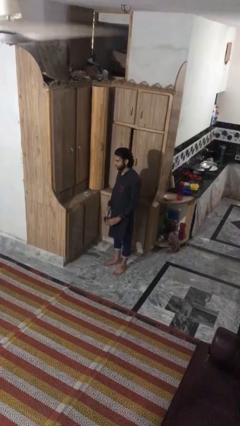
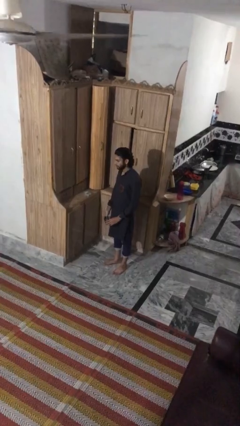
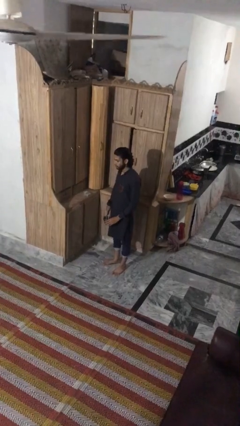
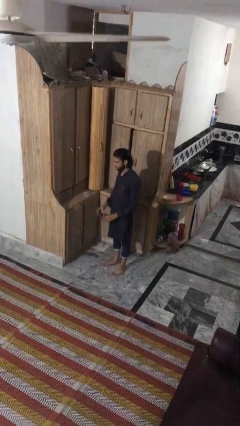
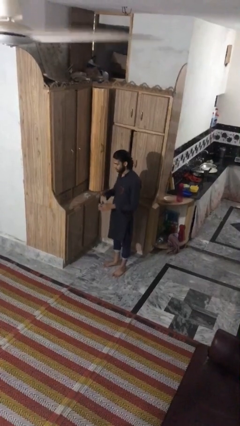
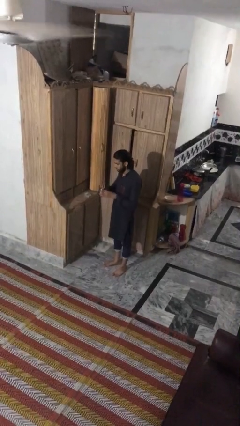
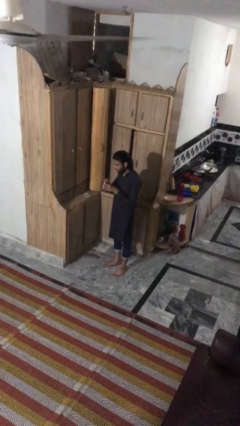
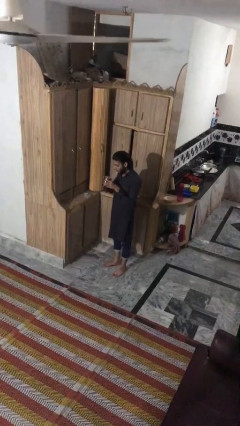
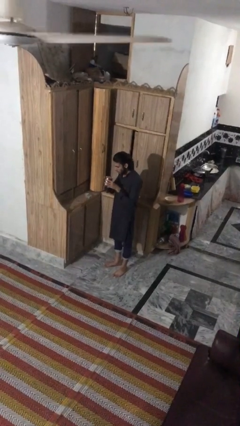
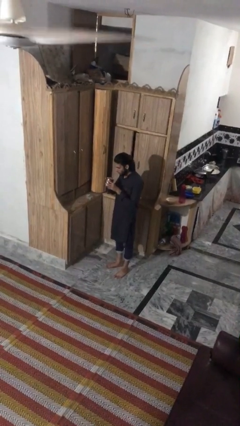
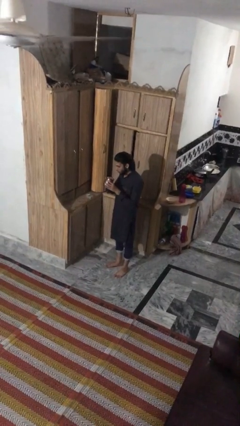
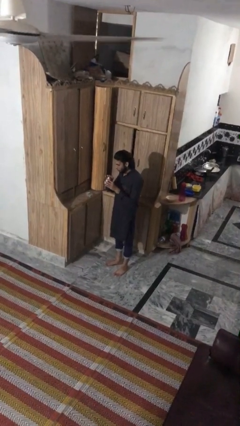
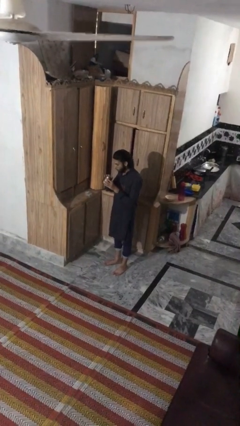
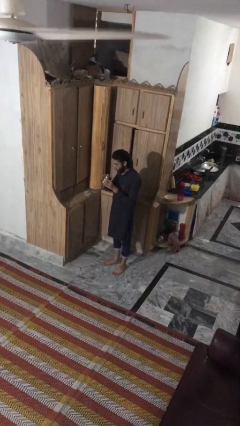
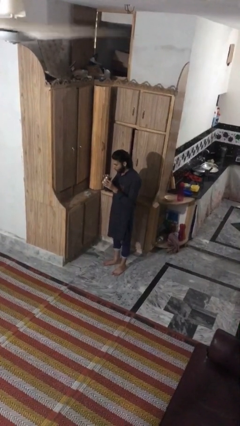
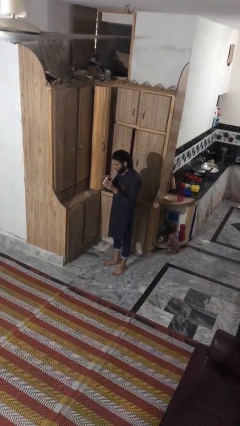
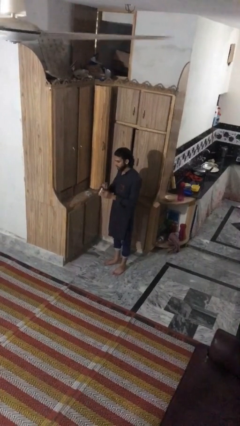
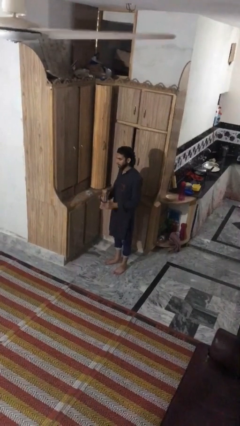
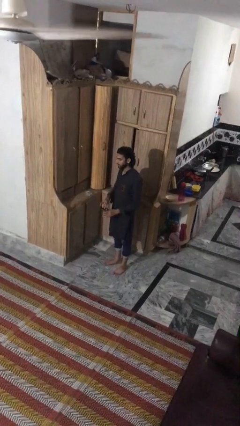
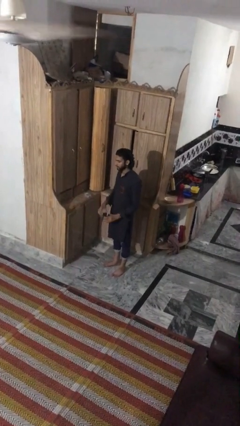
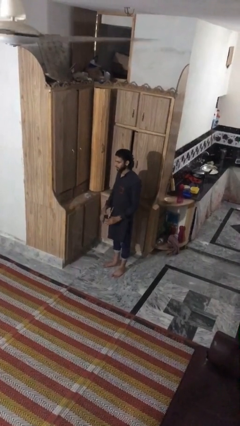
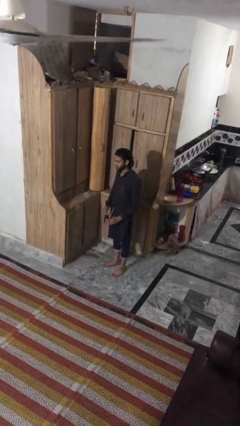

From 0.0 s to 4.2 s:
person drinks from straw

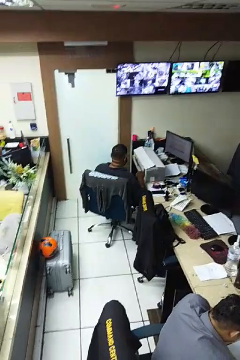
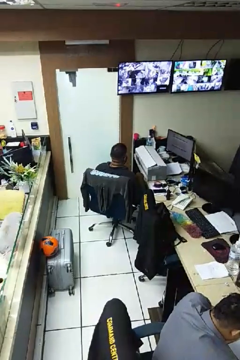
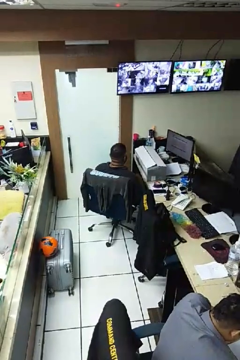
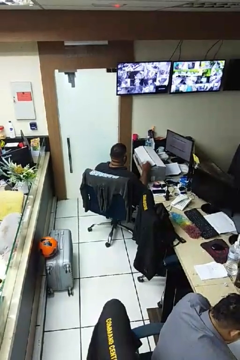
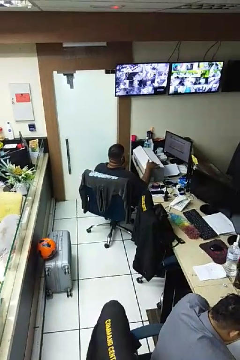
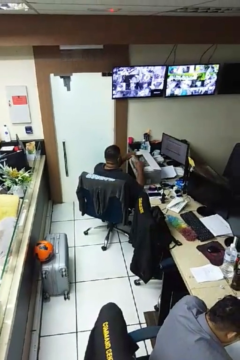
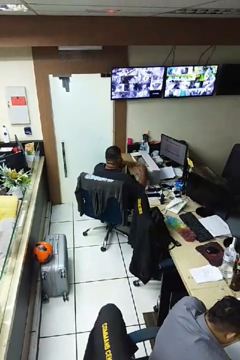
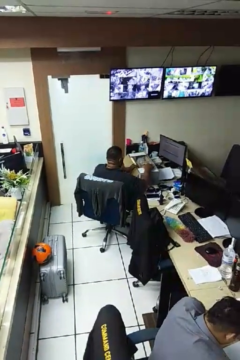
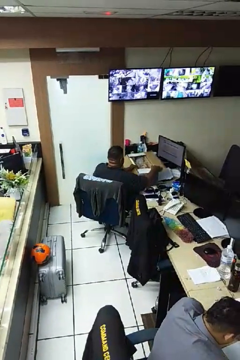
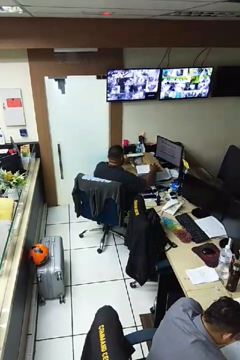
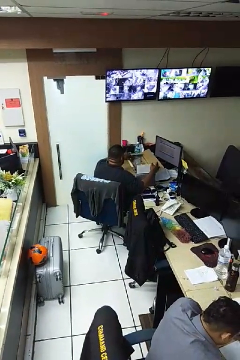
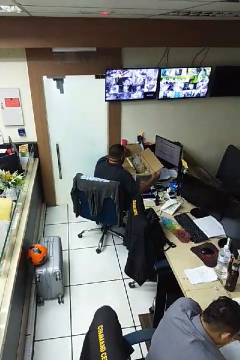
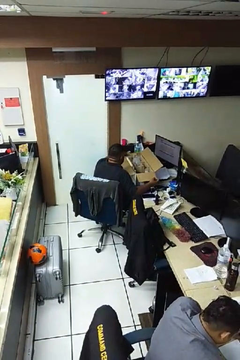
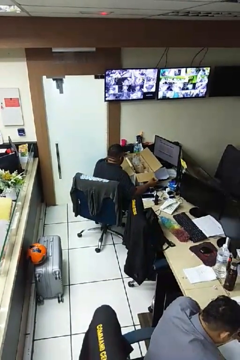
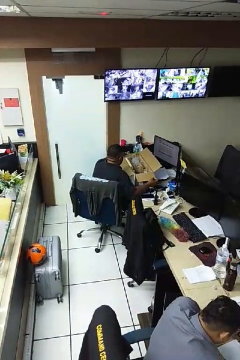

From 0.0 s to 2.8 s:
person opens box

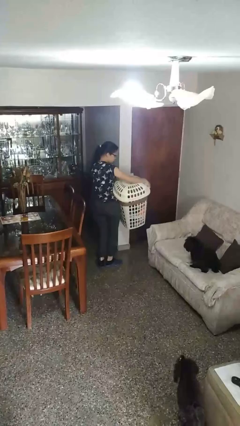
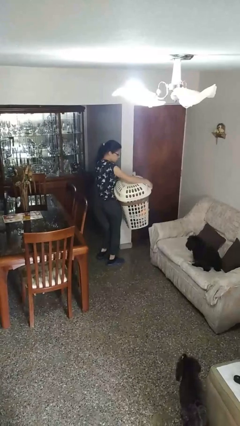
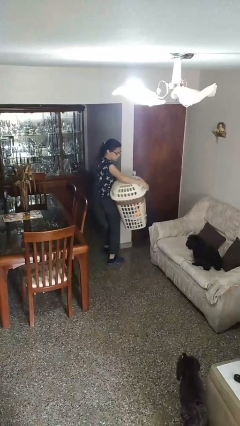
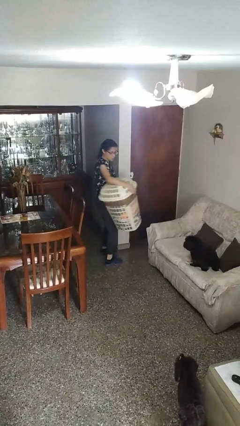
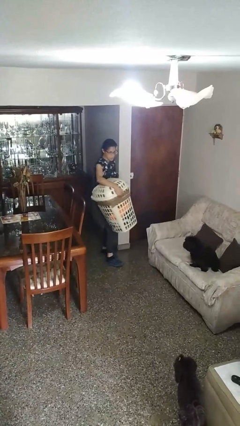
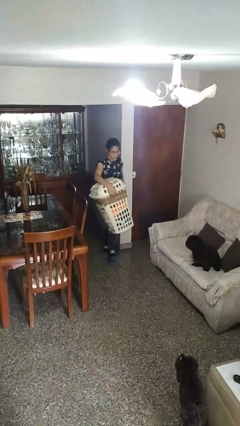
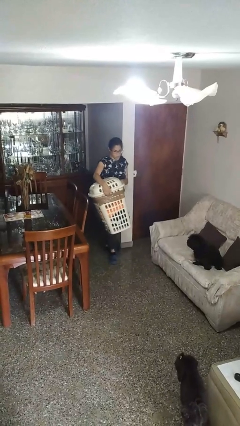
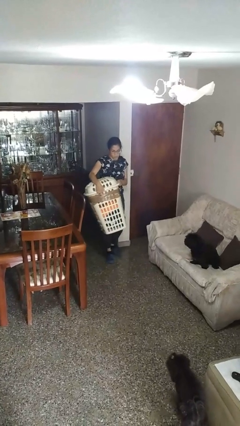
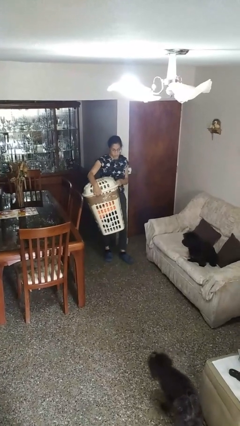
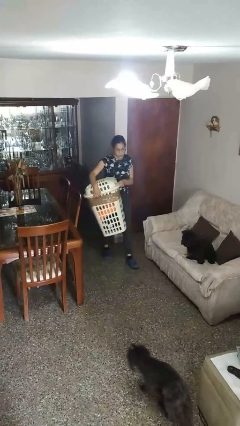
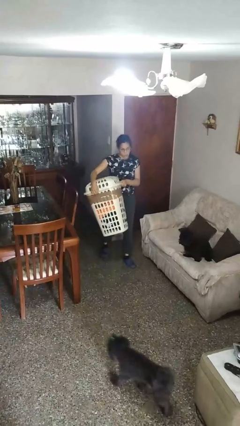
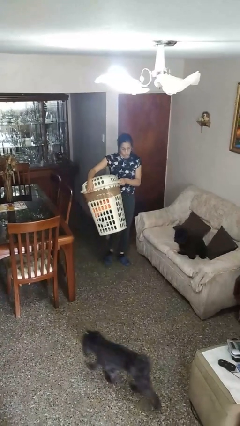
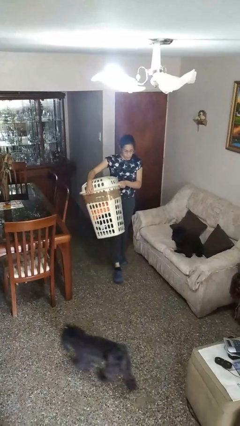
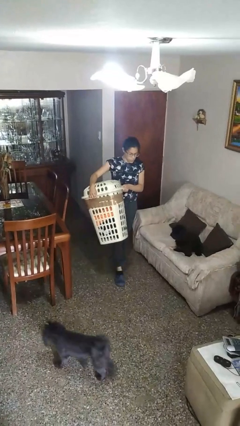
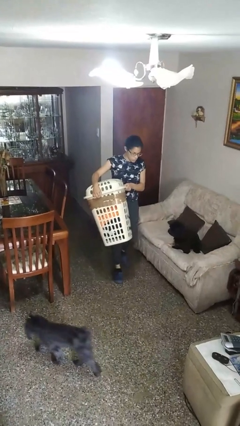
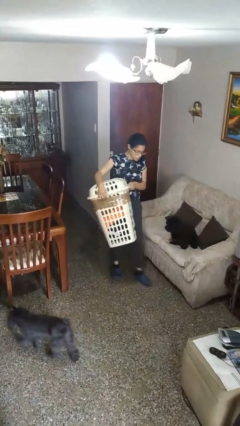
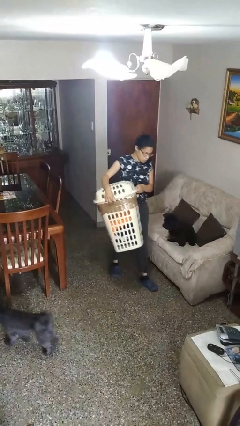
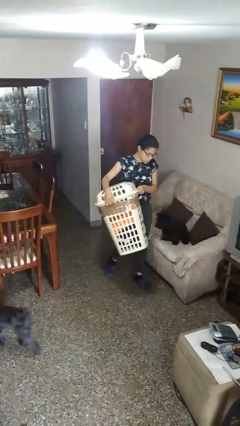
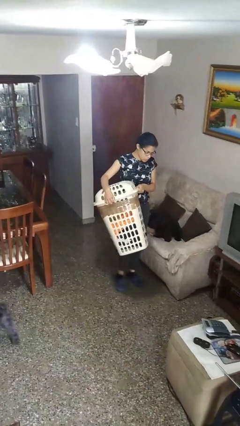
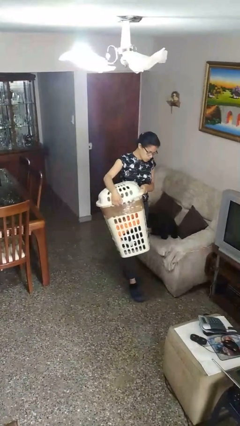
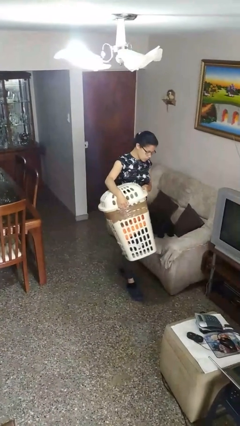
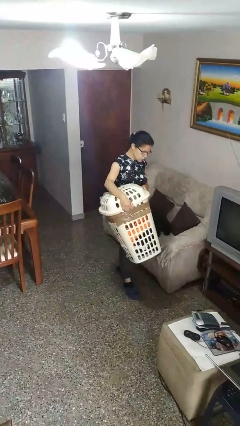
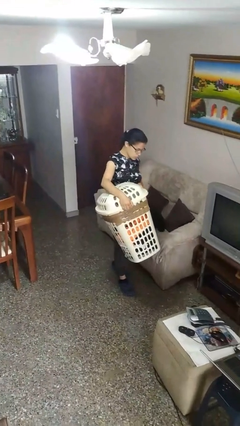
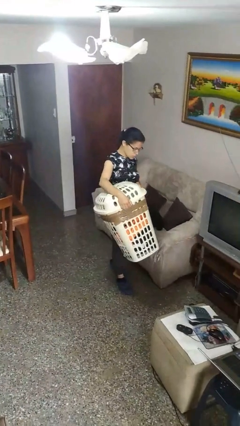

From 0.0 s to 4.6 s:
person carries laundry basket

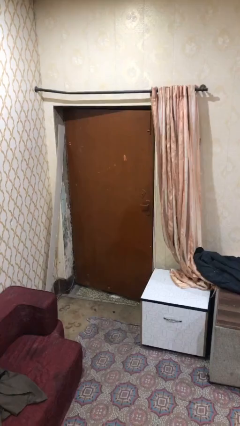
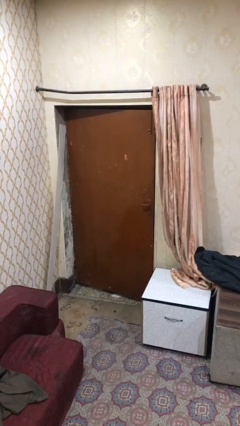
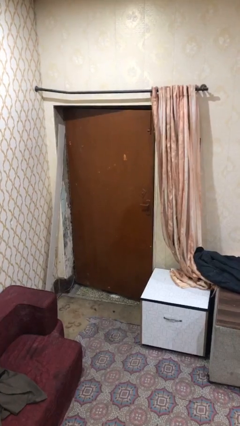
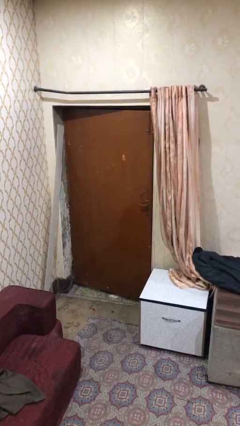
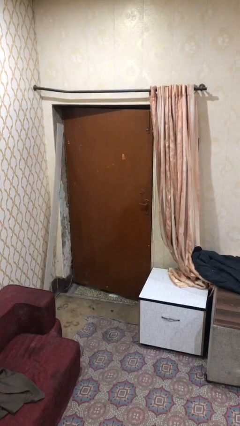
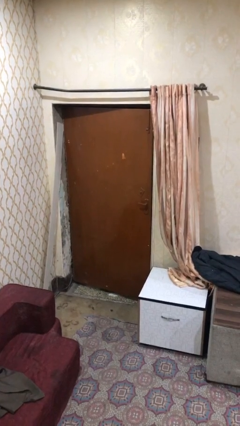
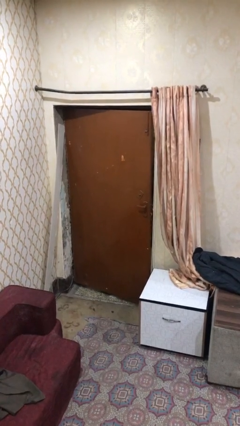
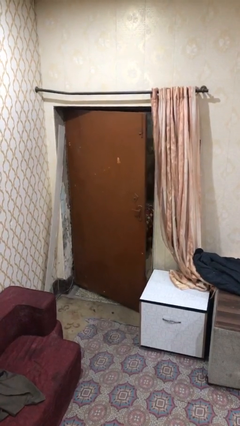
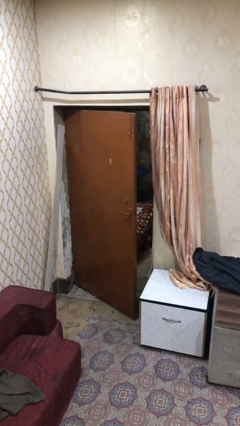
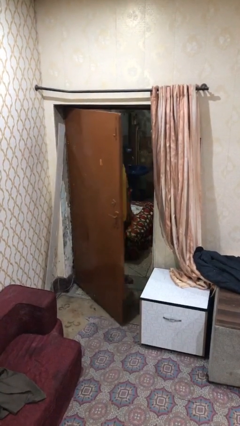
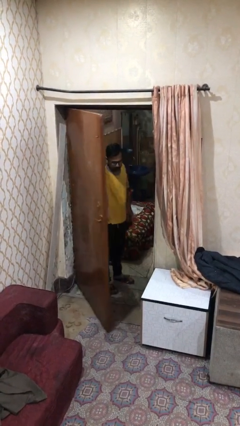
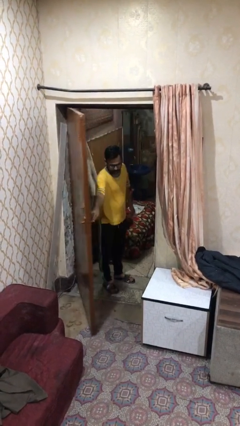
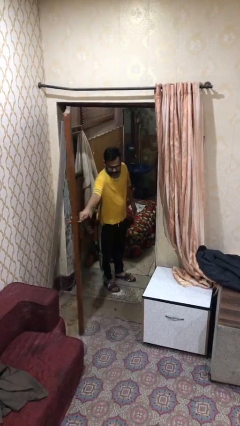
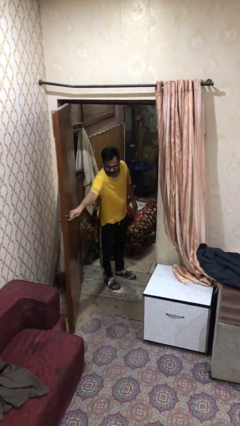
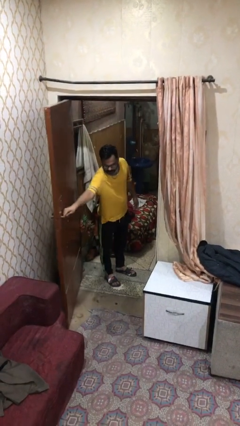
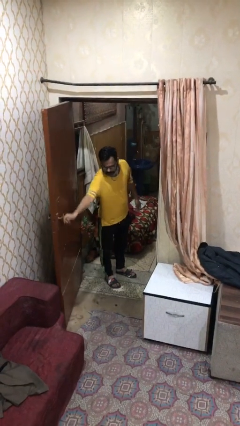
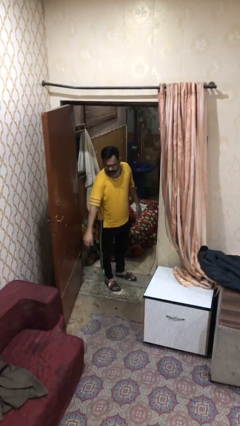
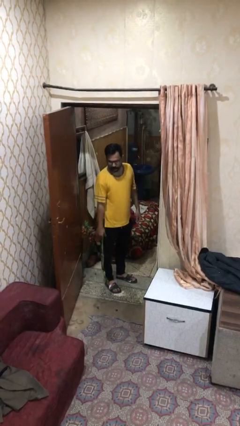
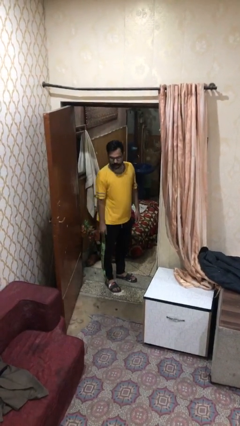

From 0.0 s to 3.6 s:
person opens facility door

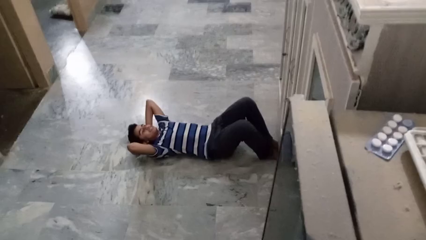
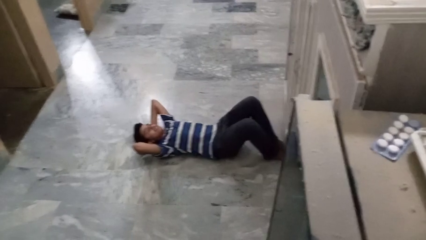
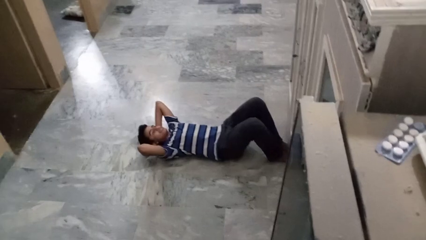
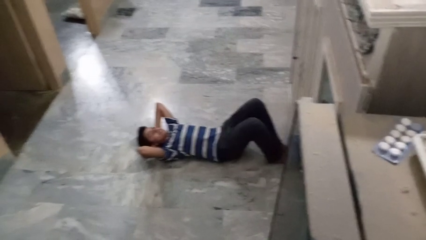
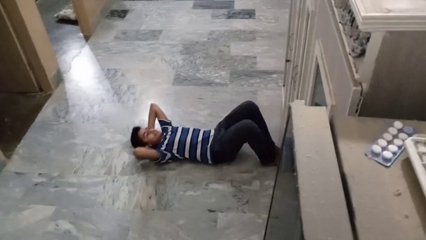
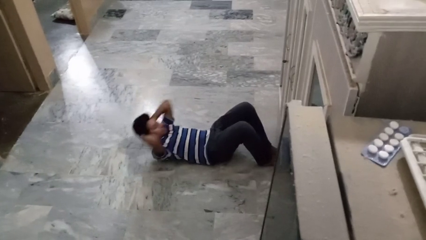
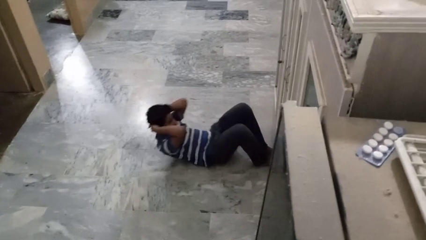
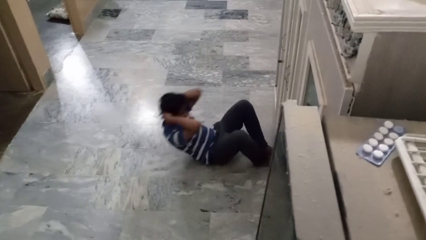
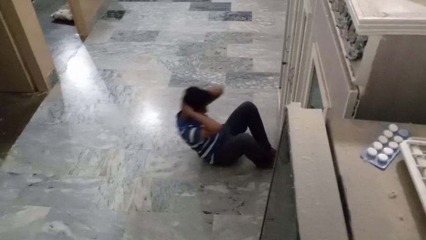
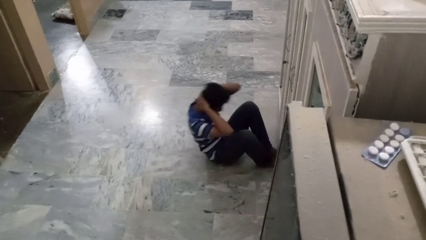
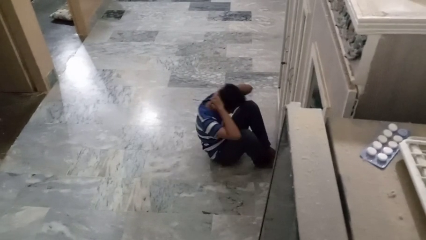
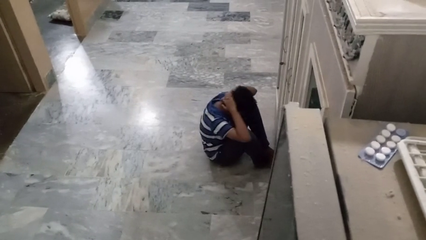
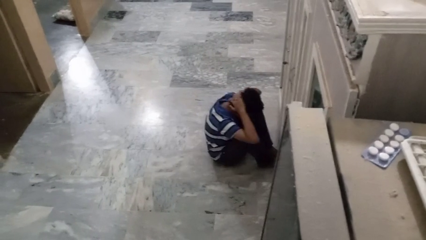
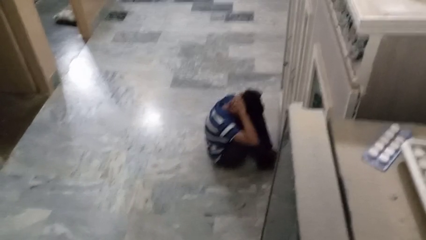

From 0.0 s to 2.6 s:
person exercises with situp
